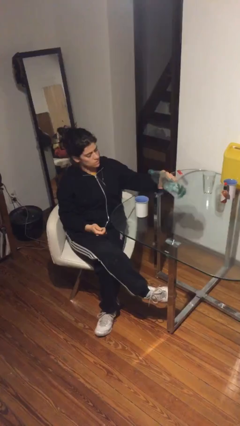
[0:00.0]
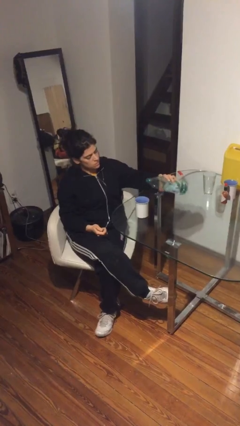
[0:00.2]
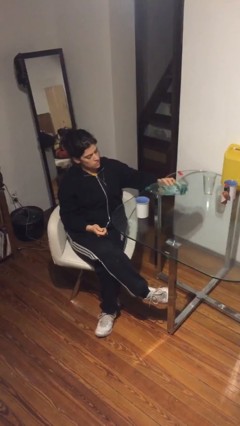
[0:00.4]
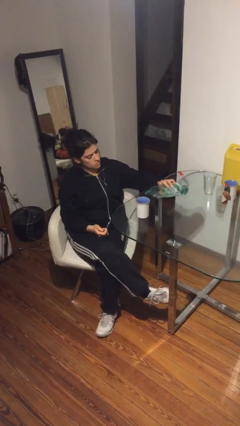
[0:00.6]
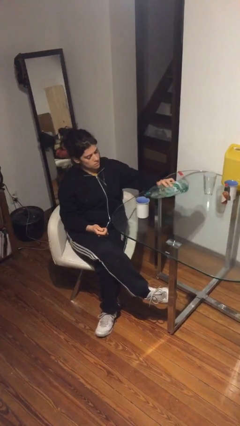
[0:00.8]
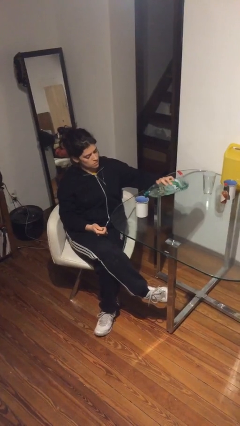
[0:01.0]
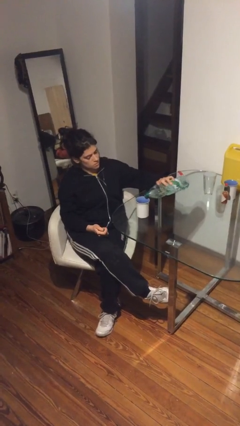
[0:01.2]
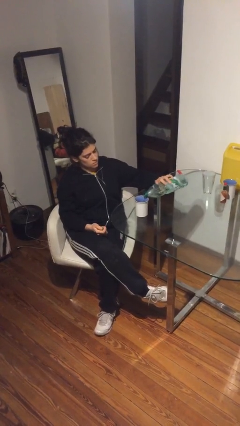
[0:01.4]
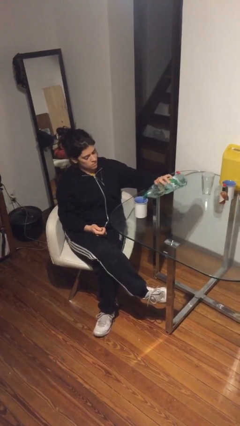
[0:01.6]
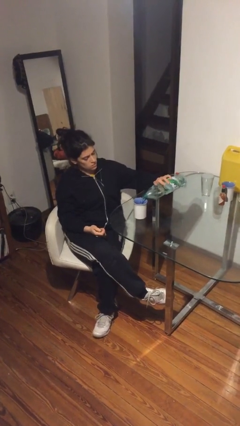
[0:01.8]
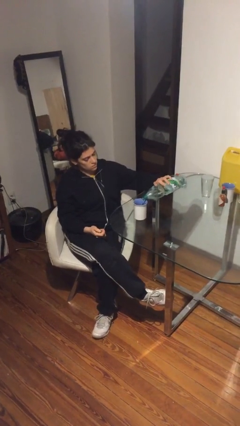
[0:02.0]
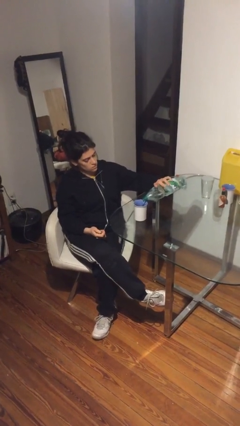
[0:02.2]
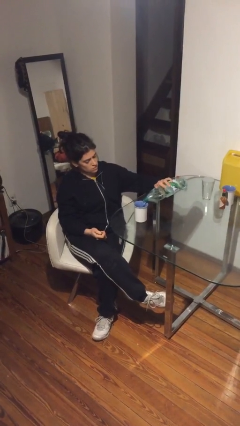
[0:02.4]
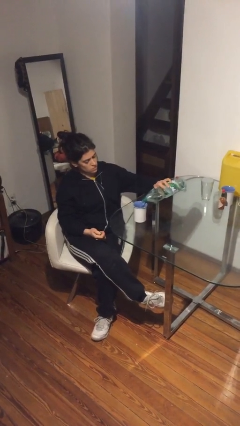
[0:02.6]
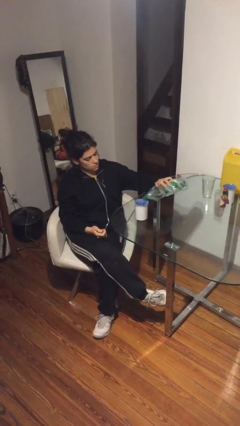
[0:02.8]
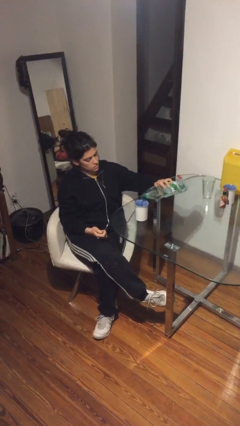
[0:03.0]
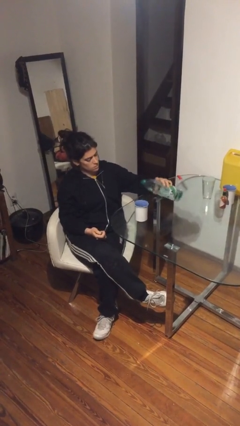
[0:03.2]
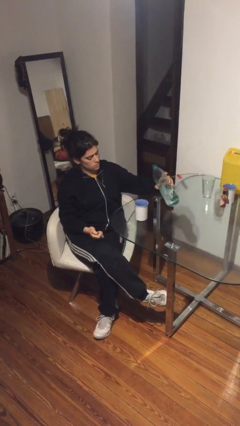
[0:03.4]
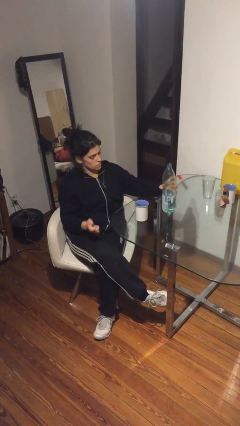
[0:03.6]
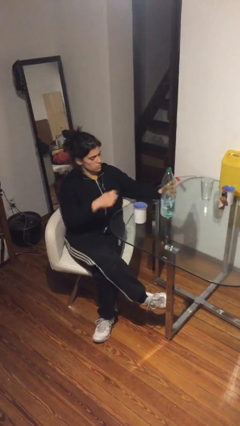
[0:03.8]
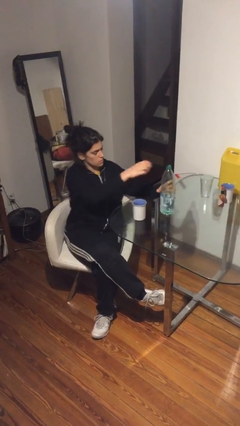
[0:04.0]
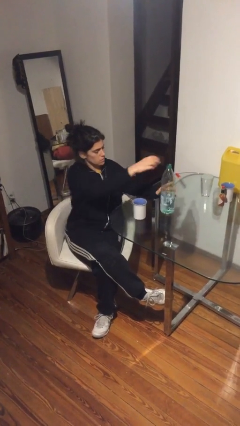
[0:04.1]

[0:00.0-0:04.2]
person pours liquid into cup

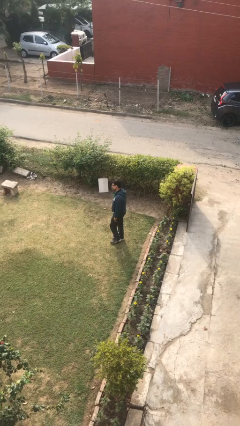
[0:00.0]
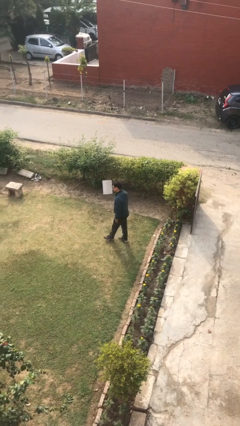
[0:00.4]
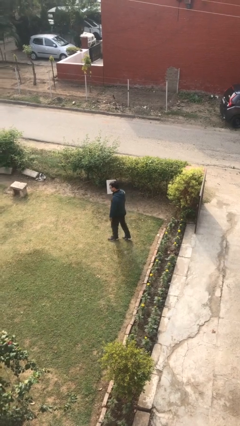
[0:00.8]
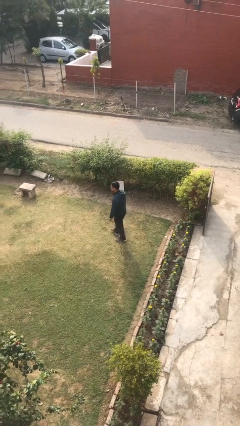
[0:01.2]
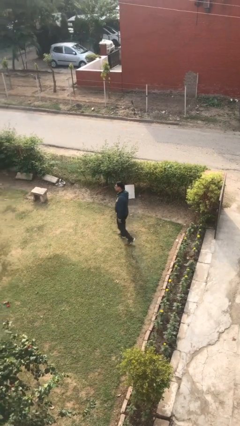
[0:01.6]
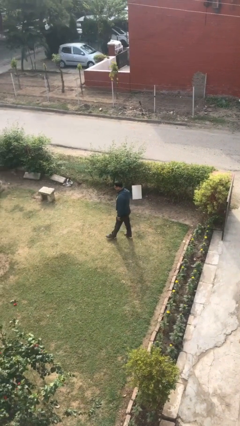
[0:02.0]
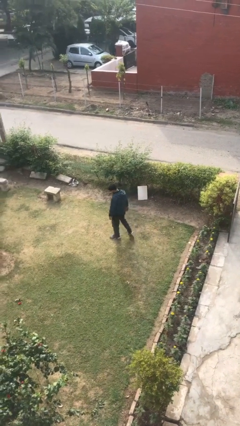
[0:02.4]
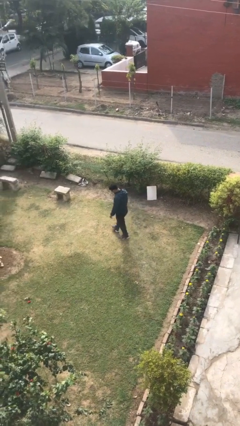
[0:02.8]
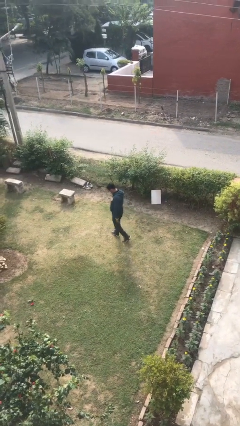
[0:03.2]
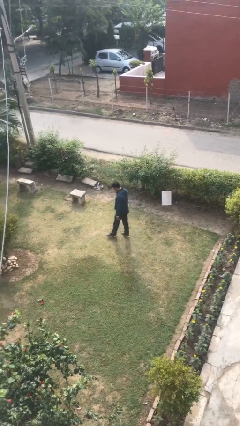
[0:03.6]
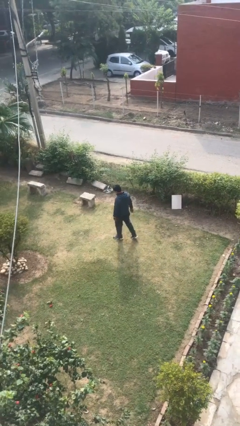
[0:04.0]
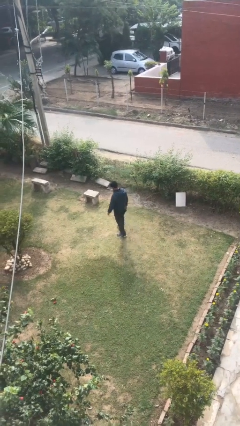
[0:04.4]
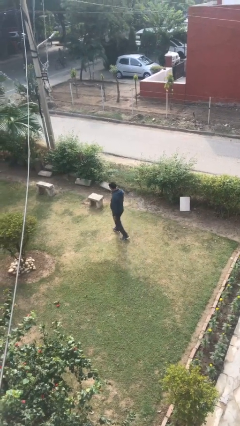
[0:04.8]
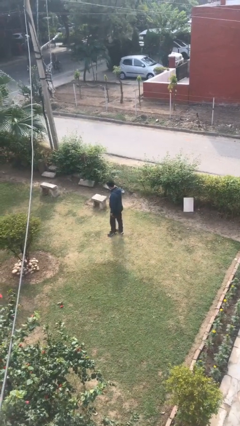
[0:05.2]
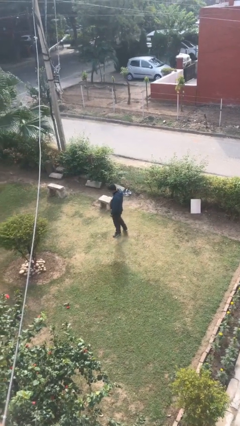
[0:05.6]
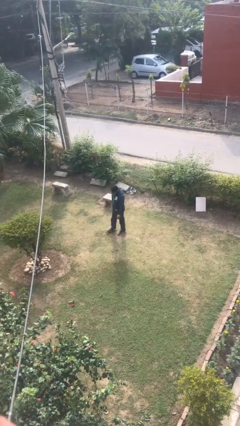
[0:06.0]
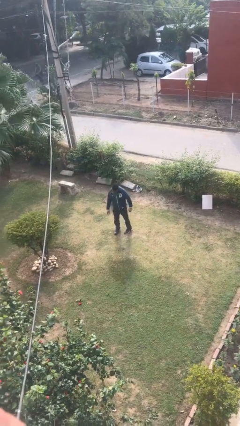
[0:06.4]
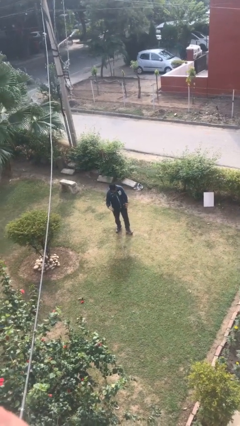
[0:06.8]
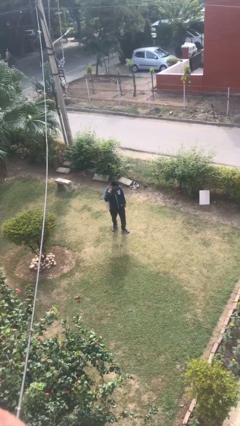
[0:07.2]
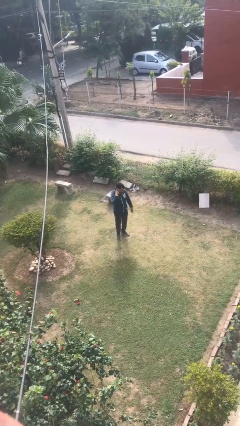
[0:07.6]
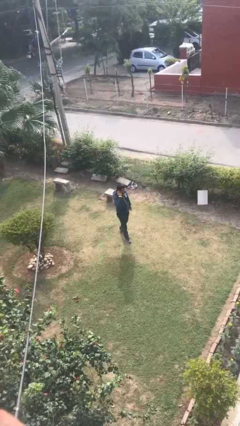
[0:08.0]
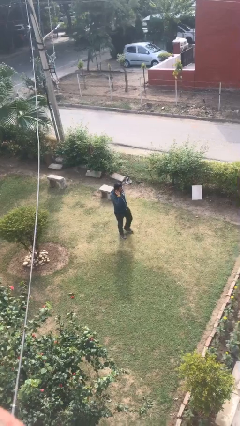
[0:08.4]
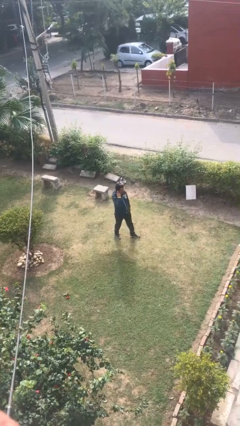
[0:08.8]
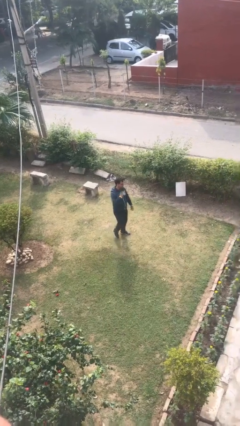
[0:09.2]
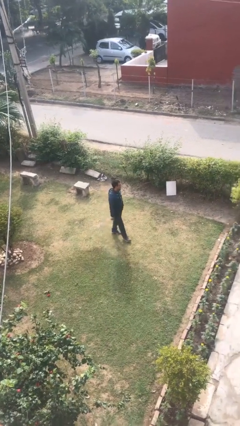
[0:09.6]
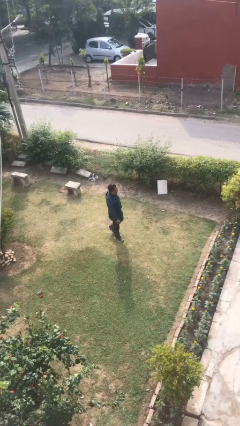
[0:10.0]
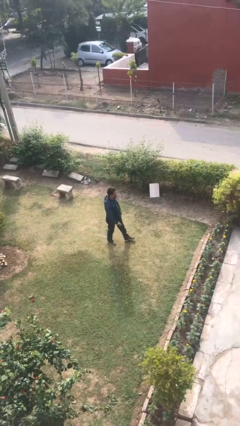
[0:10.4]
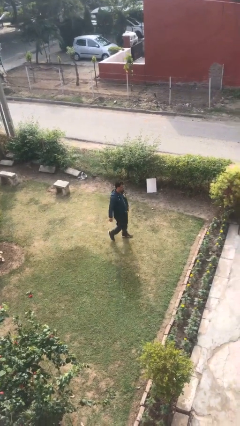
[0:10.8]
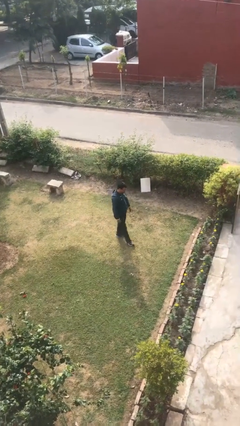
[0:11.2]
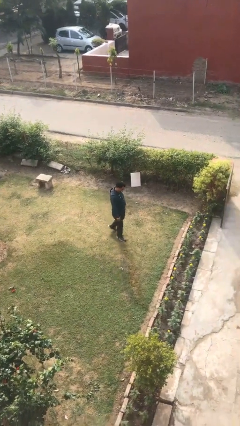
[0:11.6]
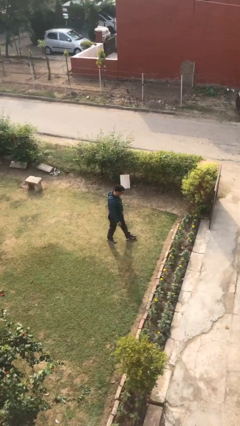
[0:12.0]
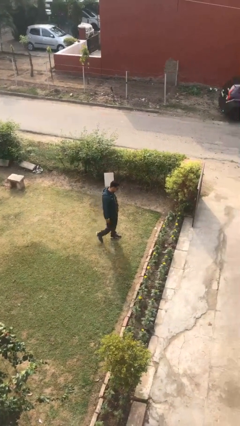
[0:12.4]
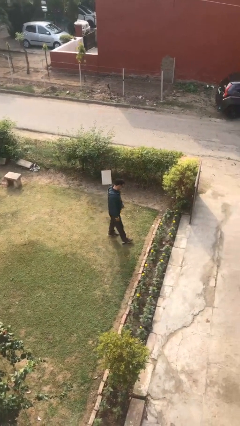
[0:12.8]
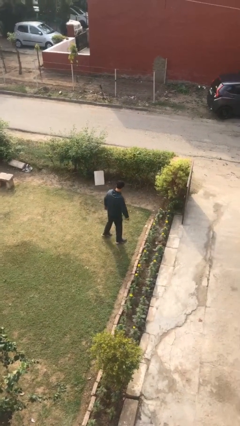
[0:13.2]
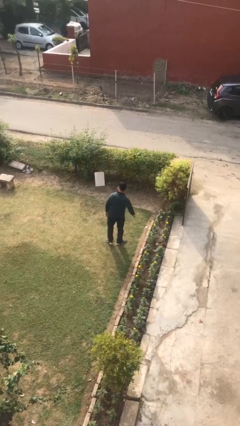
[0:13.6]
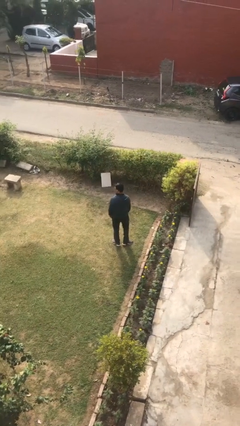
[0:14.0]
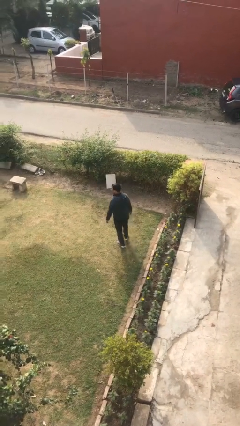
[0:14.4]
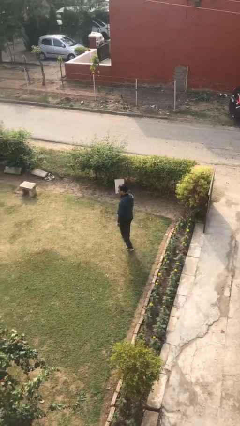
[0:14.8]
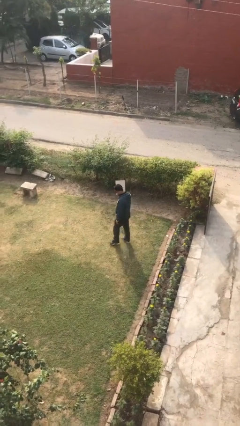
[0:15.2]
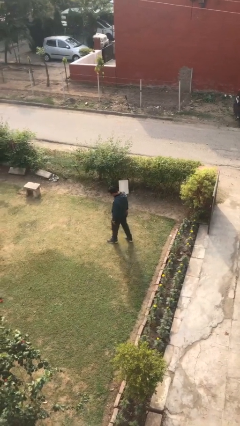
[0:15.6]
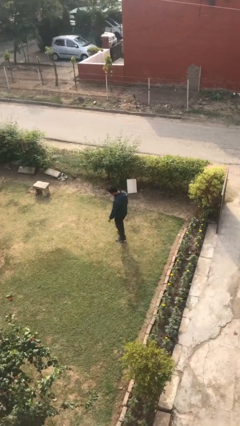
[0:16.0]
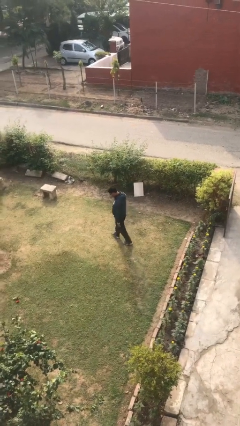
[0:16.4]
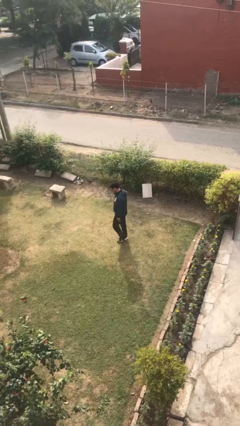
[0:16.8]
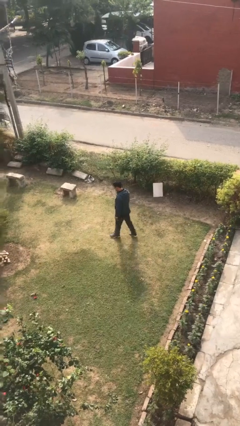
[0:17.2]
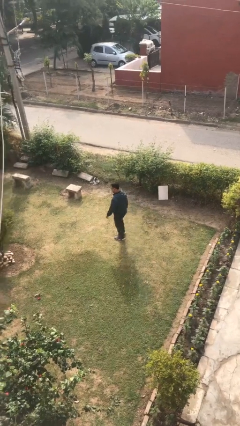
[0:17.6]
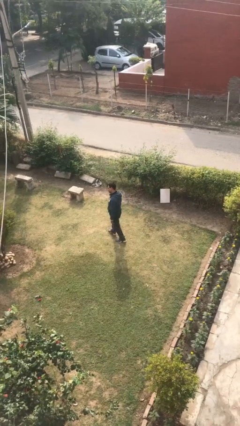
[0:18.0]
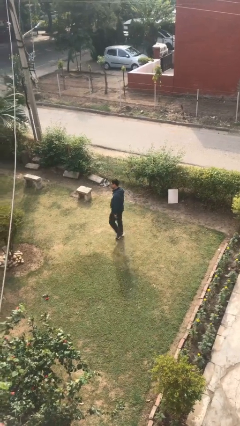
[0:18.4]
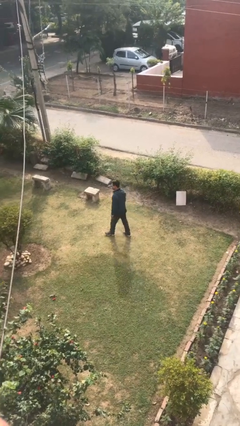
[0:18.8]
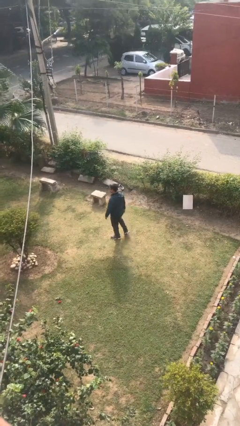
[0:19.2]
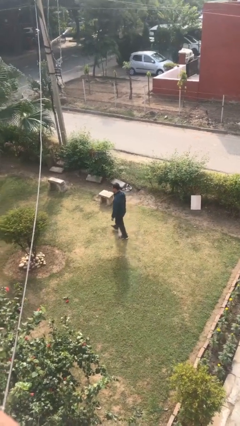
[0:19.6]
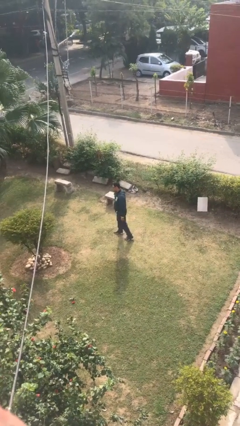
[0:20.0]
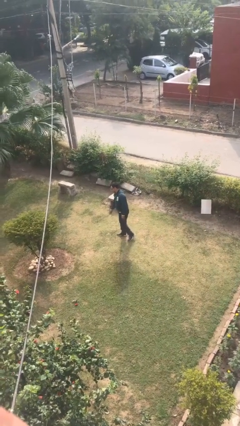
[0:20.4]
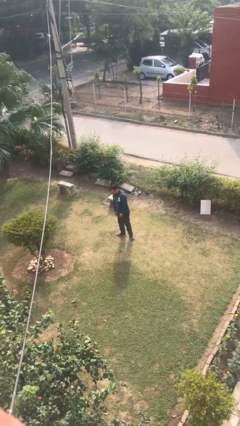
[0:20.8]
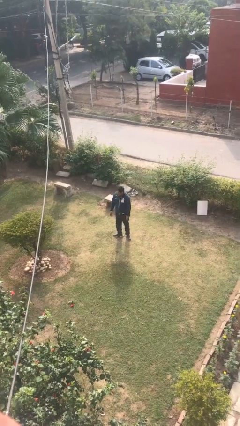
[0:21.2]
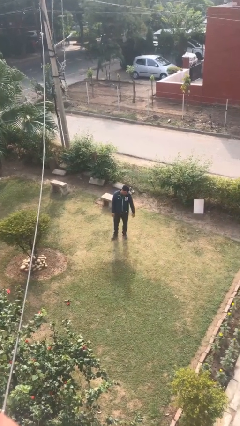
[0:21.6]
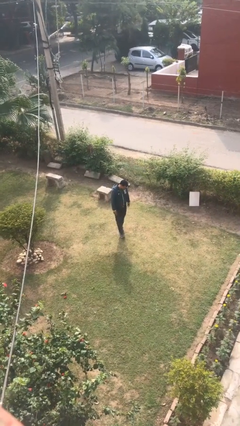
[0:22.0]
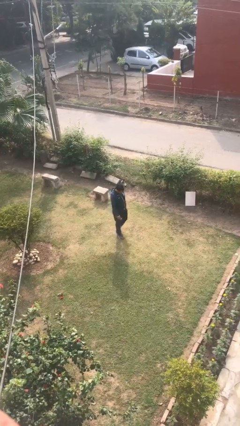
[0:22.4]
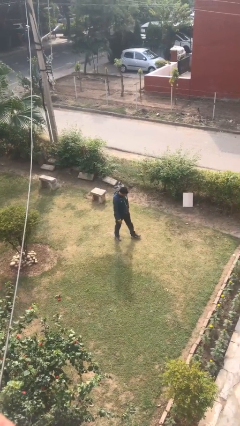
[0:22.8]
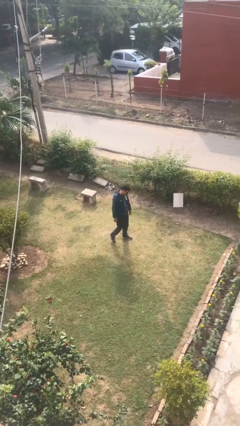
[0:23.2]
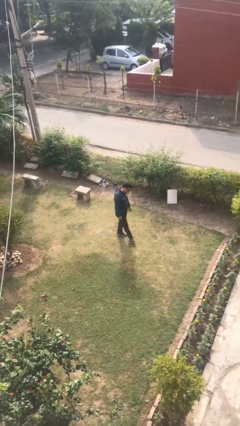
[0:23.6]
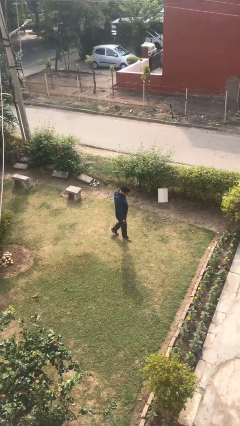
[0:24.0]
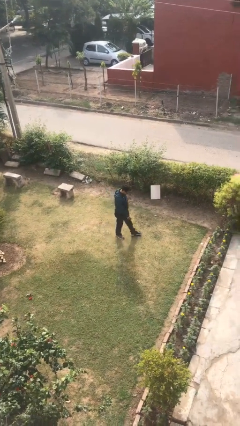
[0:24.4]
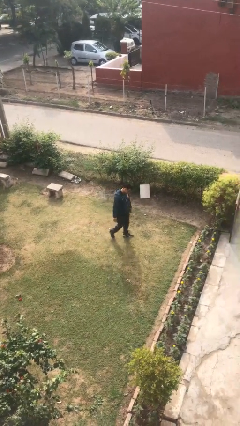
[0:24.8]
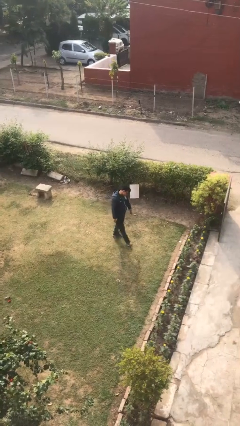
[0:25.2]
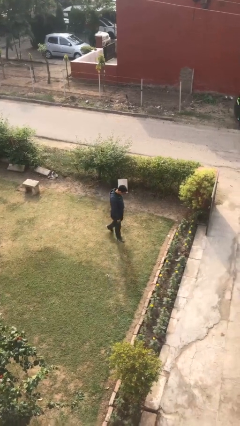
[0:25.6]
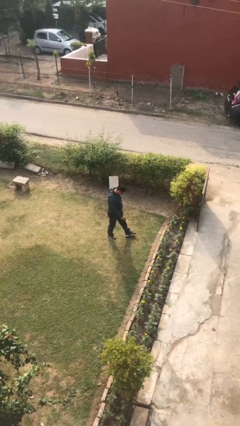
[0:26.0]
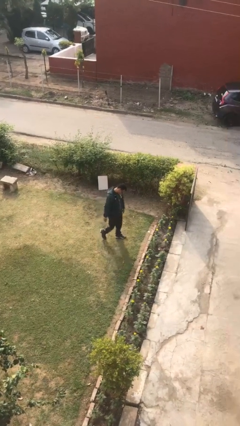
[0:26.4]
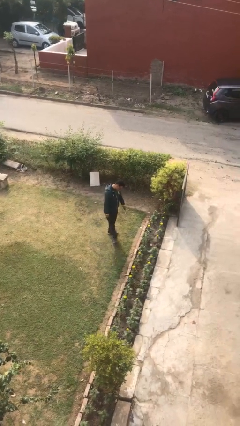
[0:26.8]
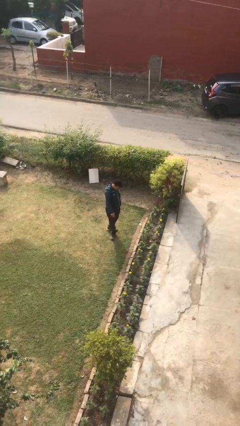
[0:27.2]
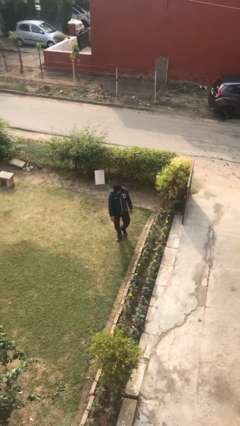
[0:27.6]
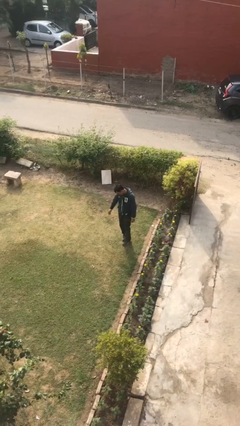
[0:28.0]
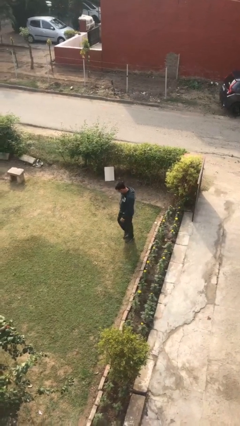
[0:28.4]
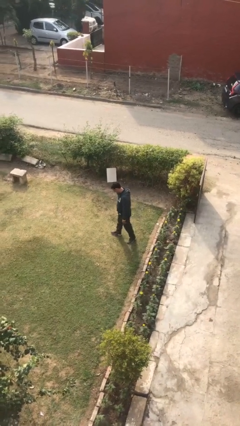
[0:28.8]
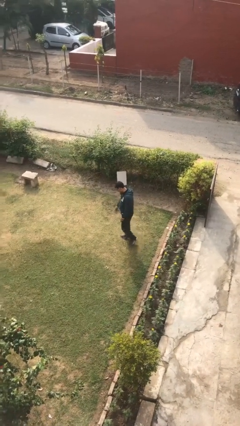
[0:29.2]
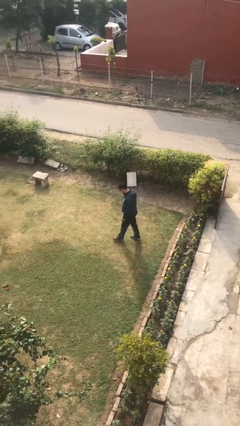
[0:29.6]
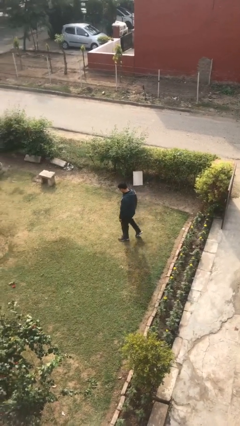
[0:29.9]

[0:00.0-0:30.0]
person walks
